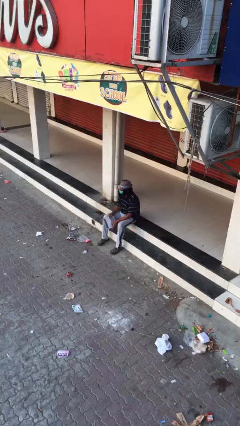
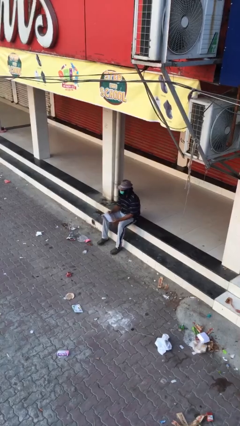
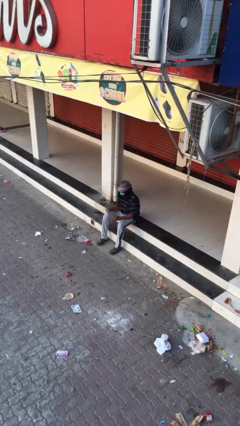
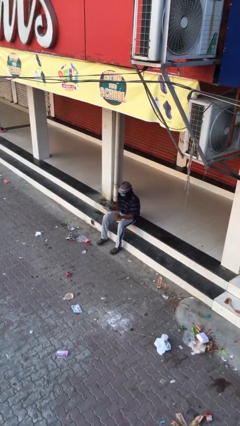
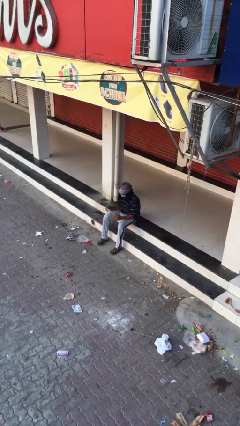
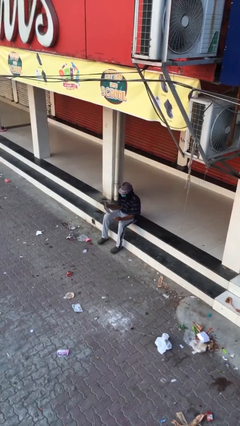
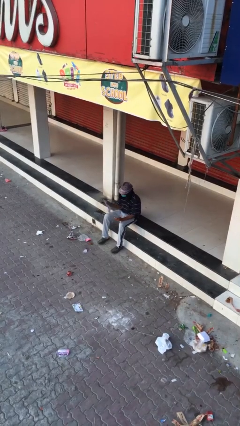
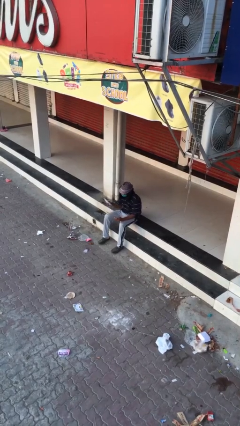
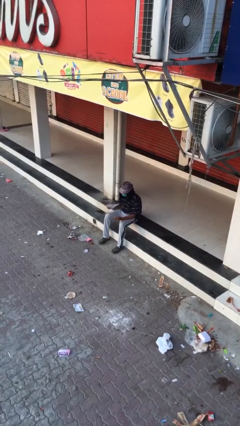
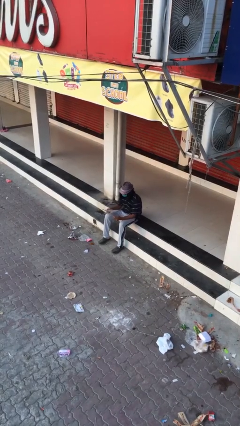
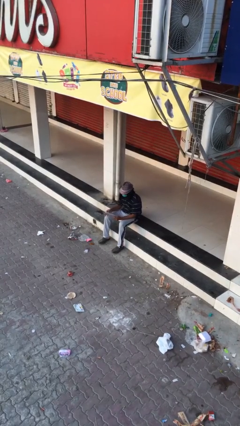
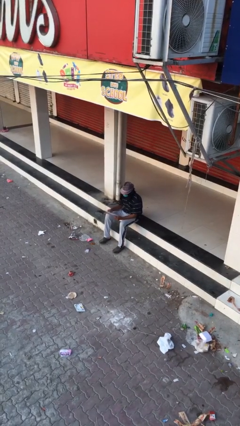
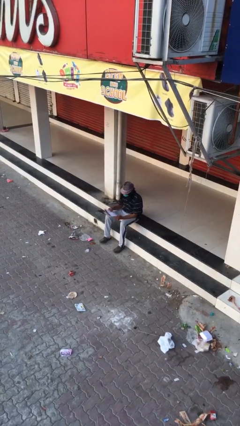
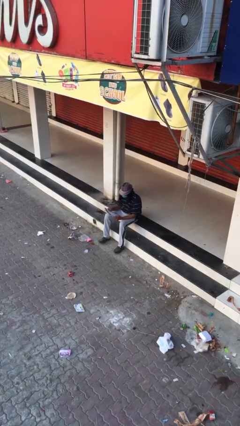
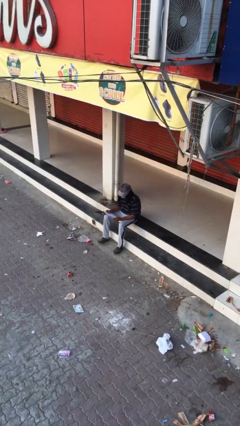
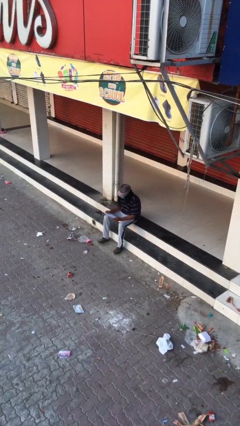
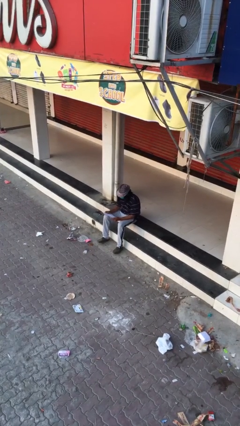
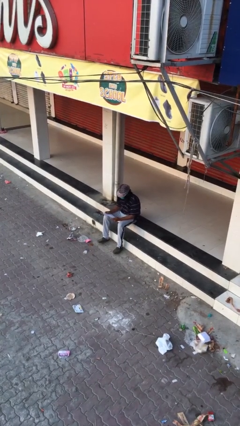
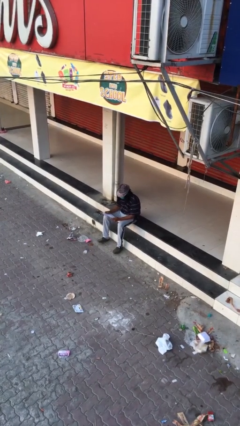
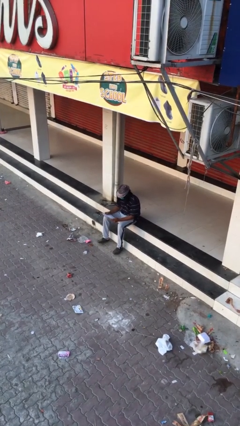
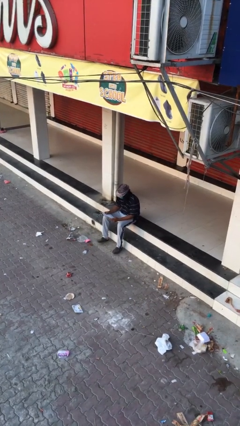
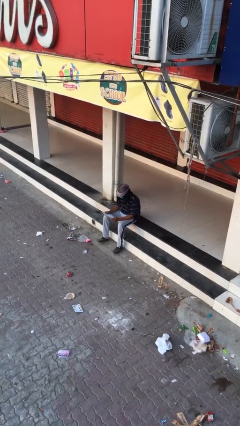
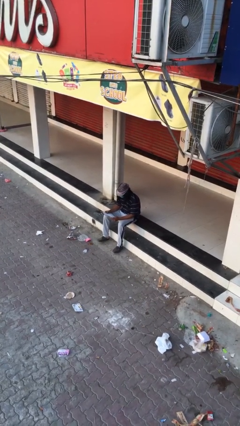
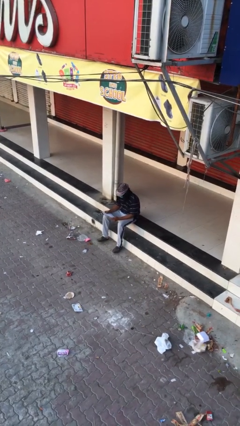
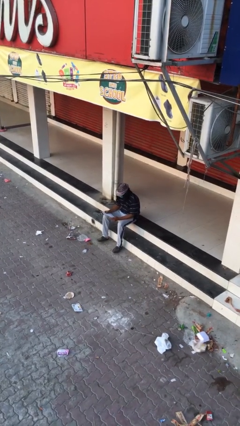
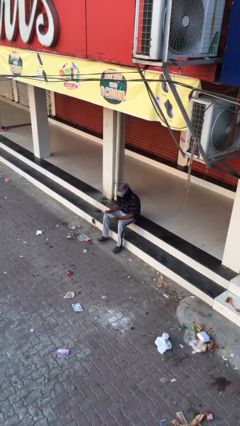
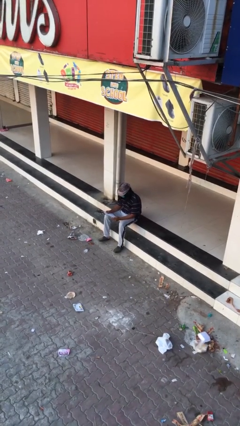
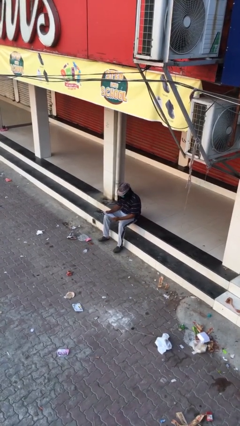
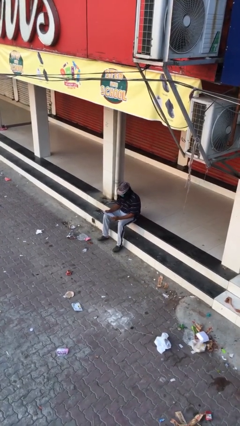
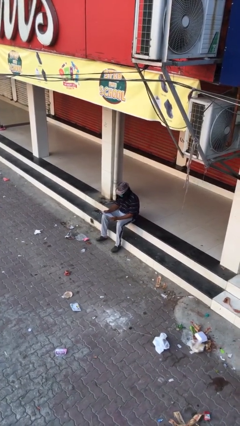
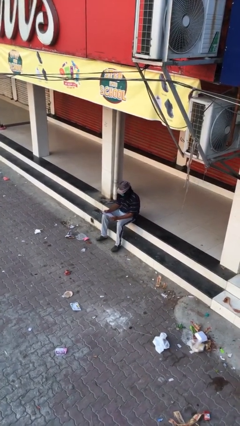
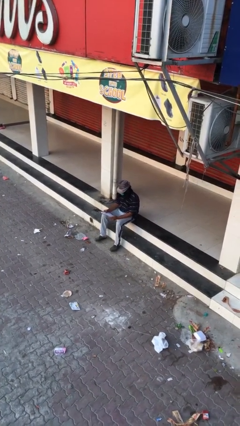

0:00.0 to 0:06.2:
person reads document

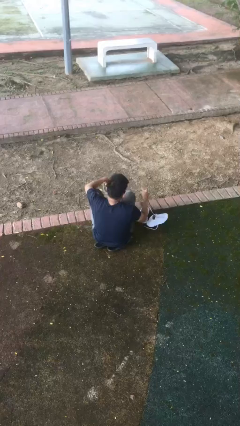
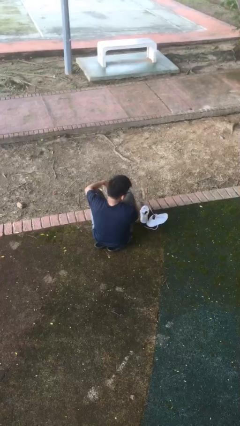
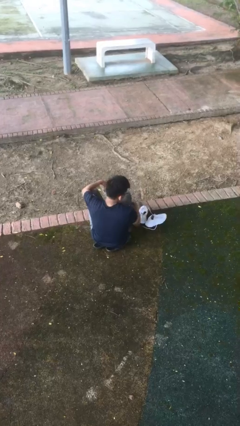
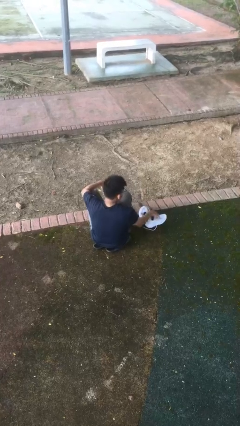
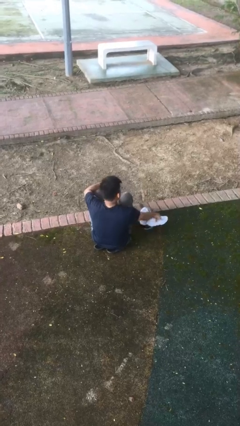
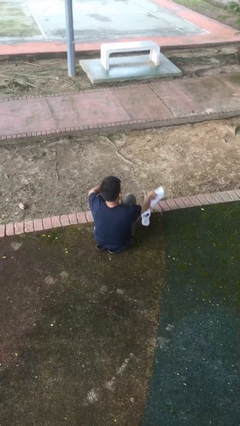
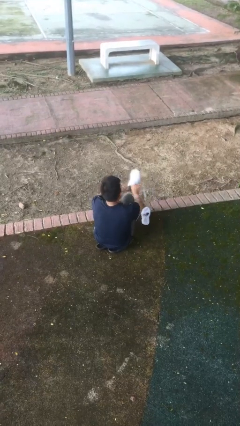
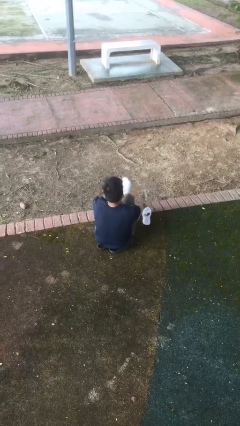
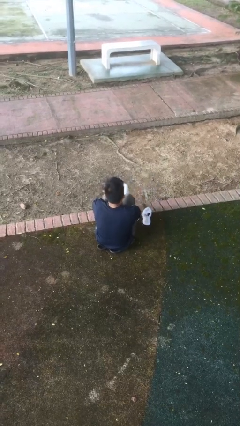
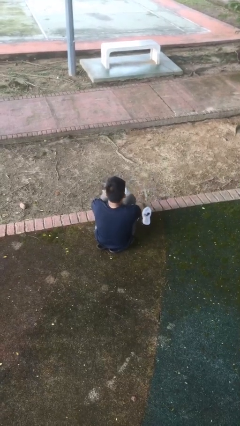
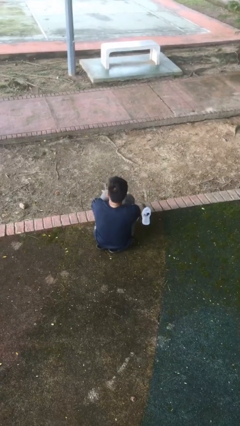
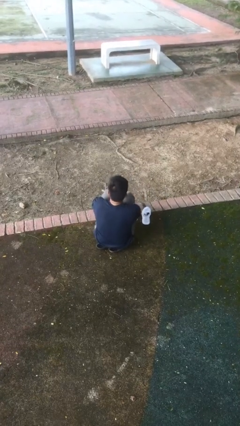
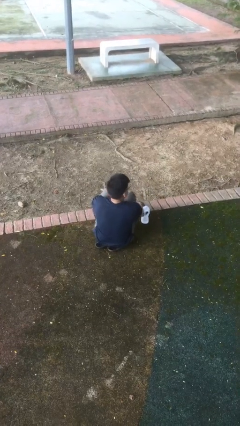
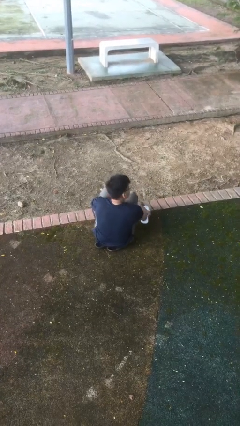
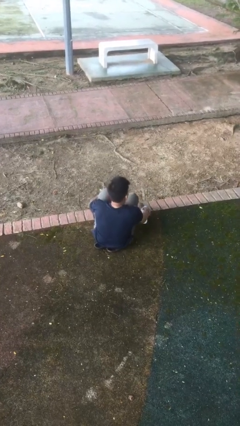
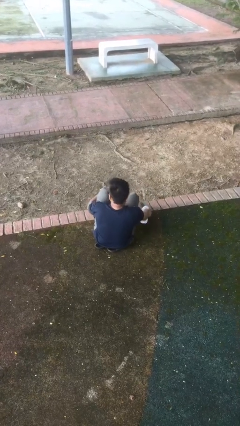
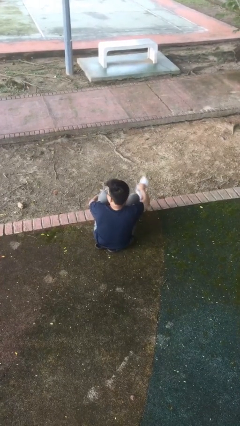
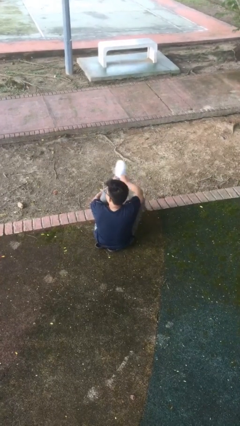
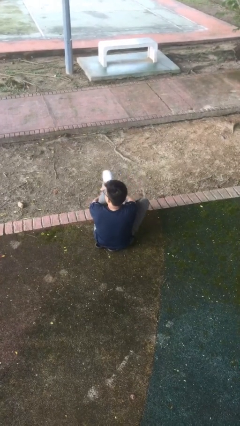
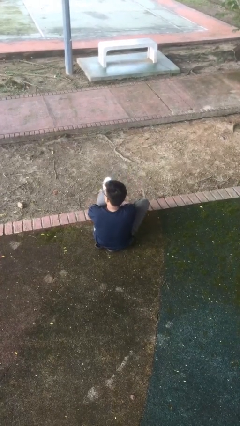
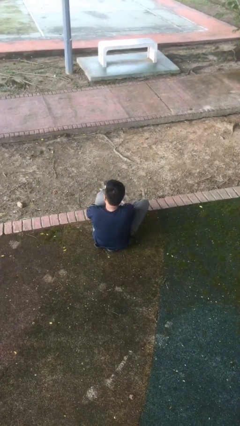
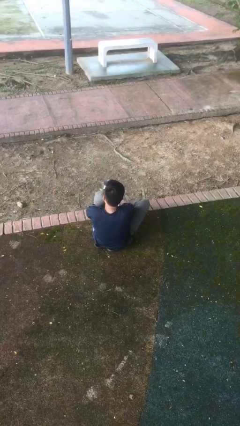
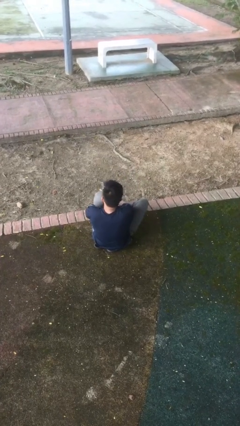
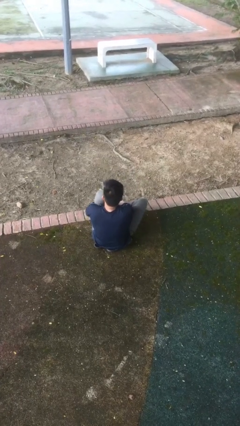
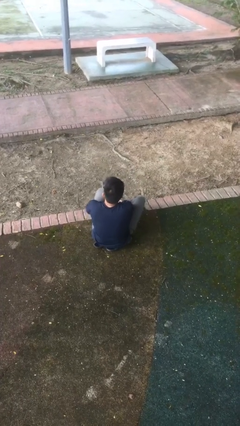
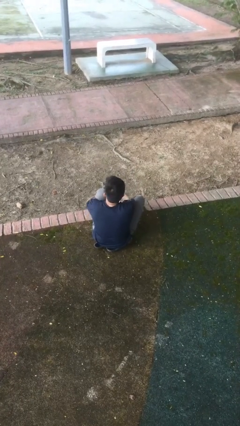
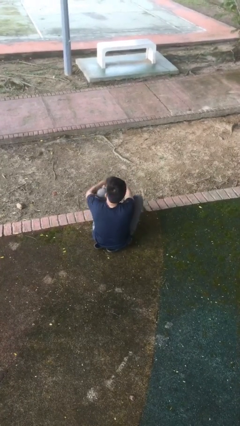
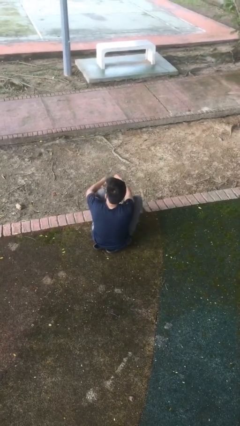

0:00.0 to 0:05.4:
person puts on shoes

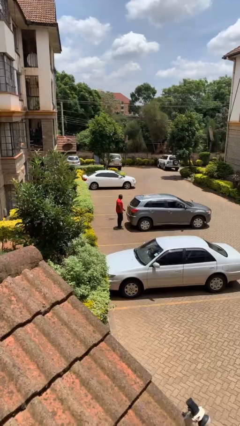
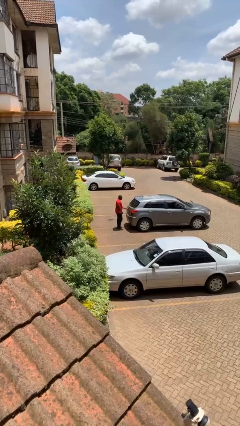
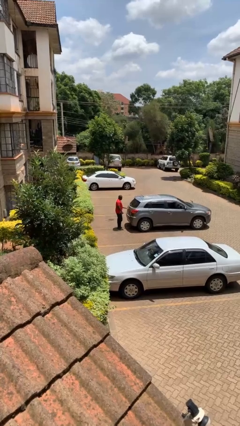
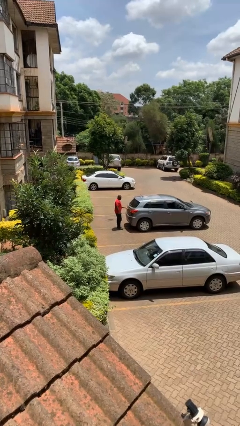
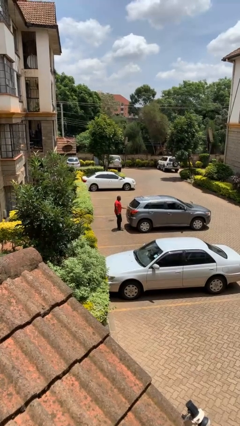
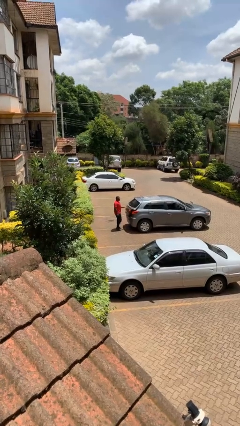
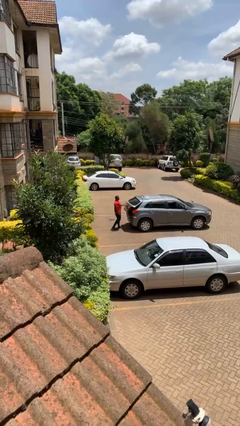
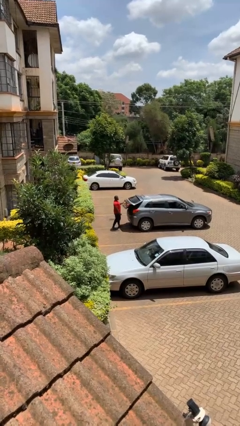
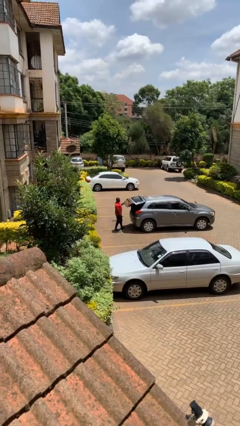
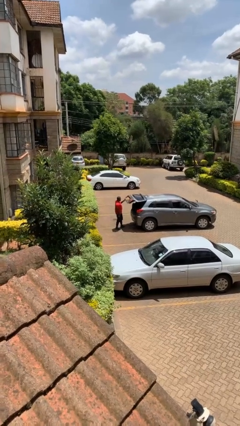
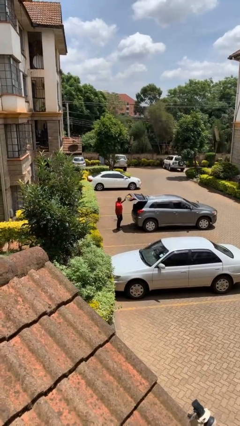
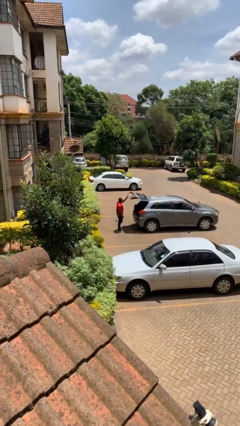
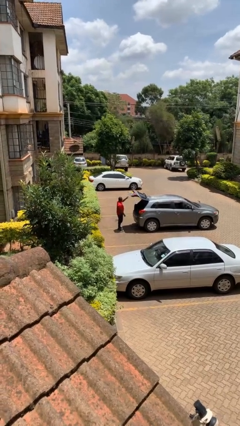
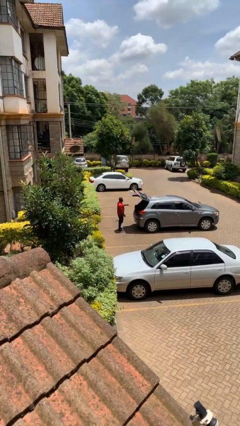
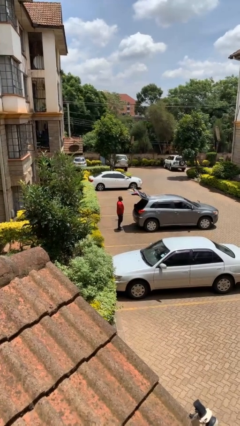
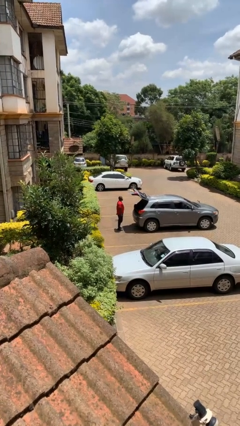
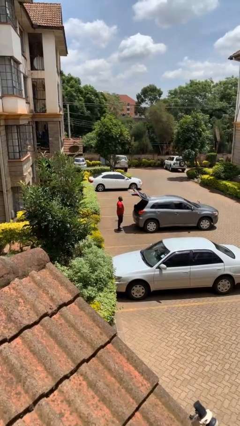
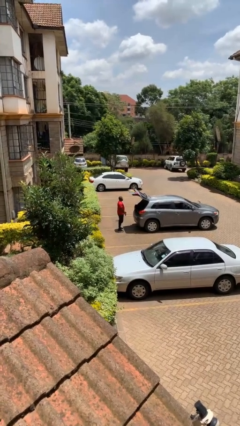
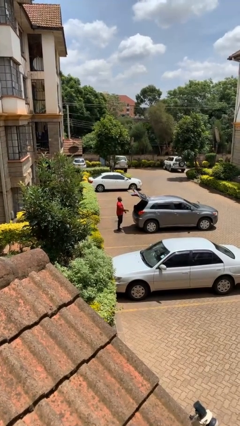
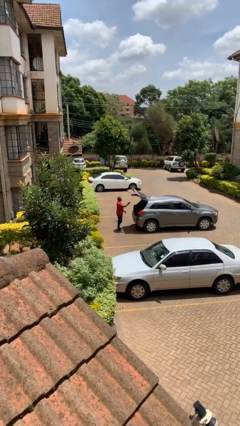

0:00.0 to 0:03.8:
person opens car trunk

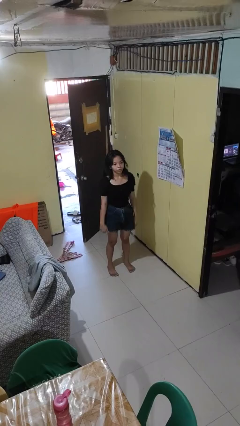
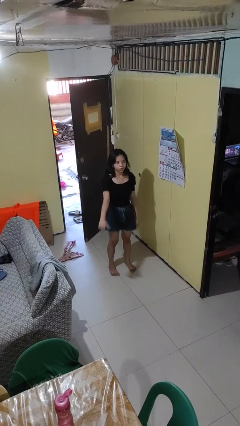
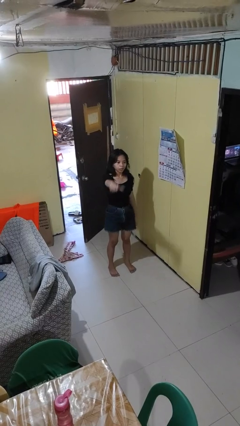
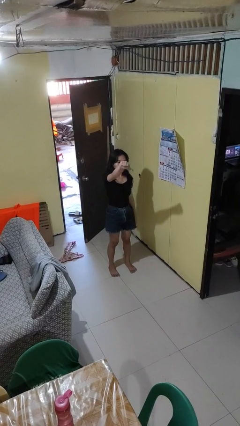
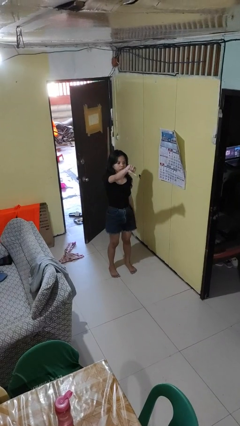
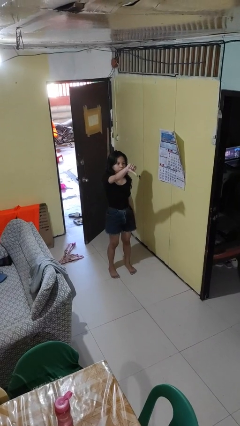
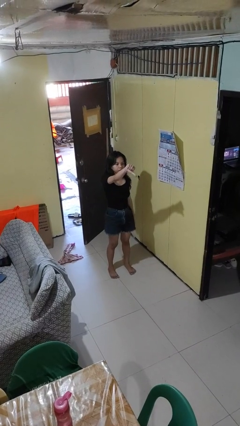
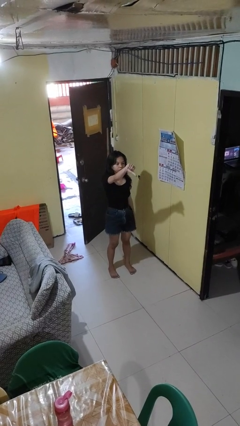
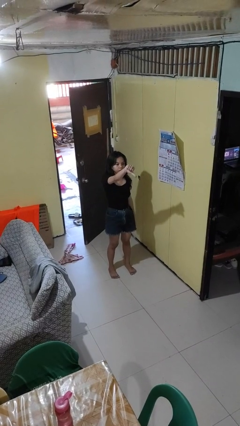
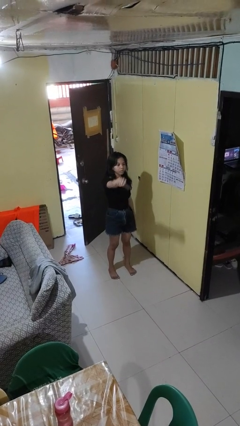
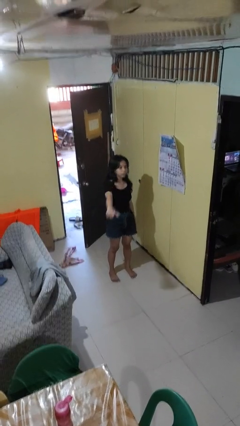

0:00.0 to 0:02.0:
person gestures thumbs down

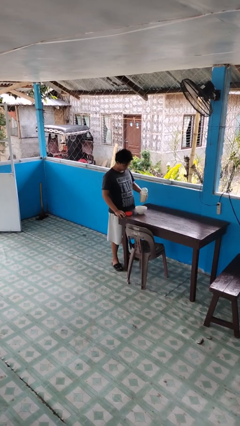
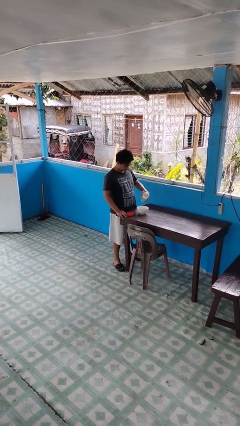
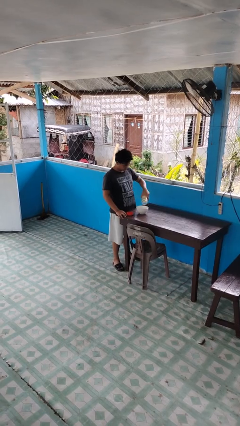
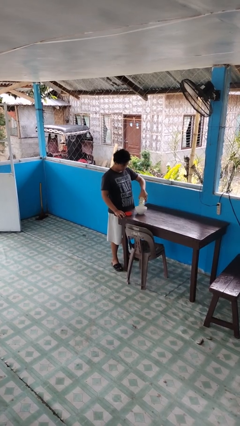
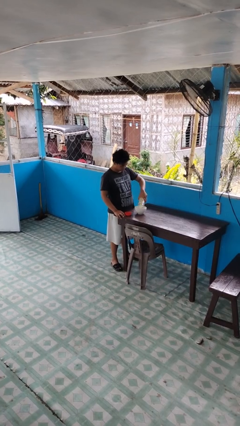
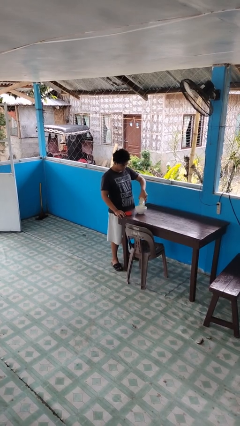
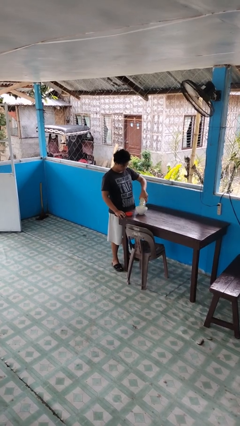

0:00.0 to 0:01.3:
person pours into bowl
